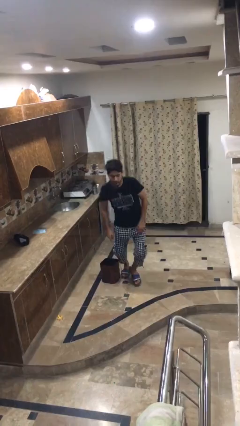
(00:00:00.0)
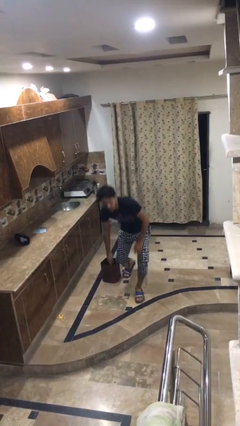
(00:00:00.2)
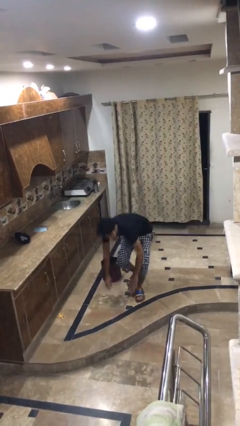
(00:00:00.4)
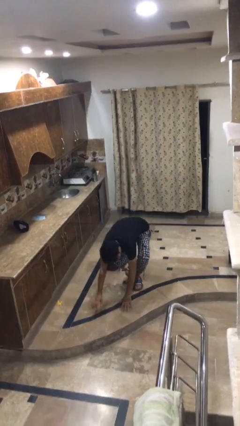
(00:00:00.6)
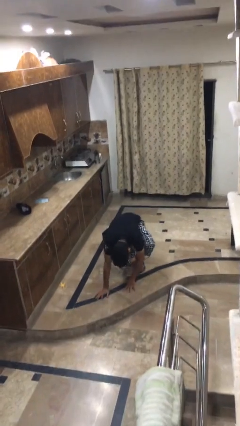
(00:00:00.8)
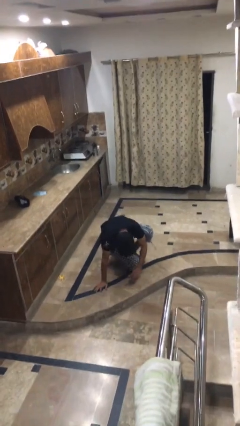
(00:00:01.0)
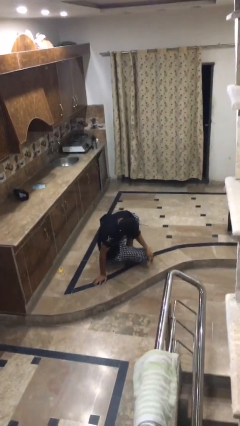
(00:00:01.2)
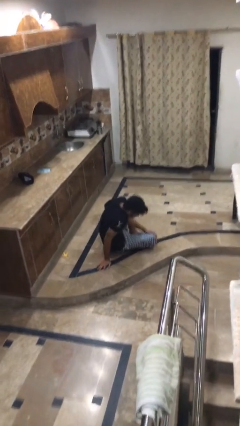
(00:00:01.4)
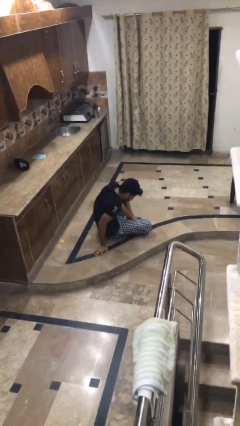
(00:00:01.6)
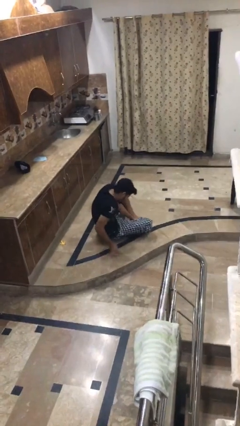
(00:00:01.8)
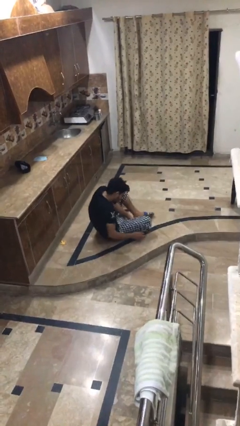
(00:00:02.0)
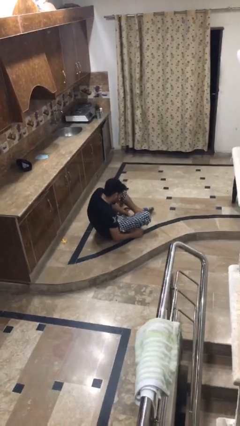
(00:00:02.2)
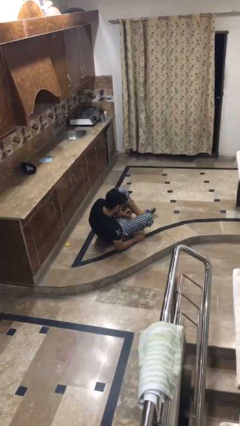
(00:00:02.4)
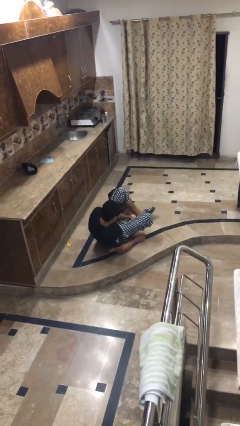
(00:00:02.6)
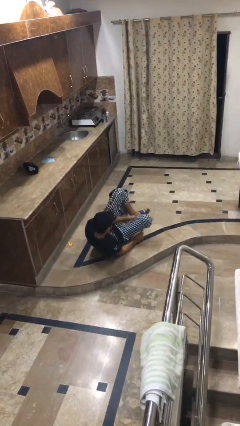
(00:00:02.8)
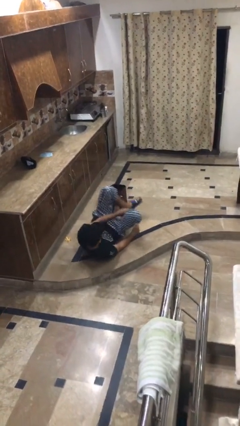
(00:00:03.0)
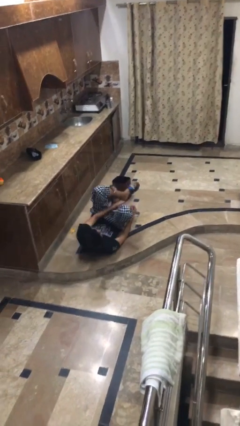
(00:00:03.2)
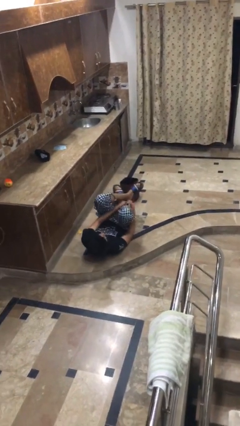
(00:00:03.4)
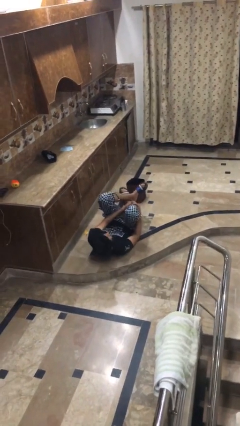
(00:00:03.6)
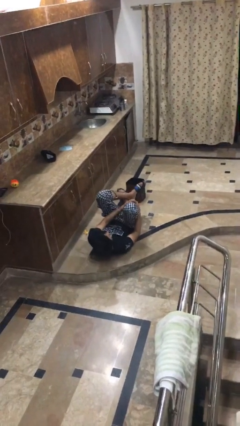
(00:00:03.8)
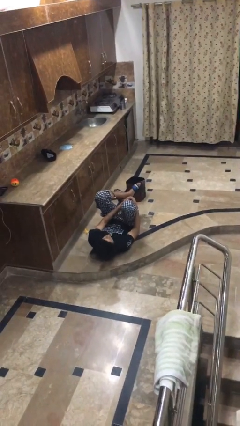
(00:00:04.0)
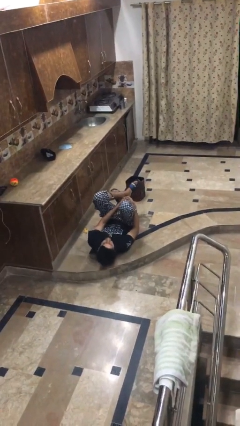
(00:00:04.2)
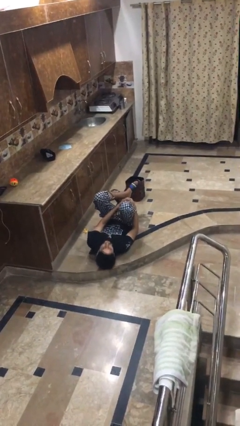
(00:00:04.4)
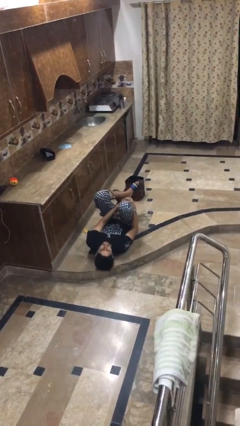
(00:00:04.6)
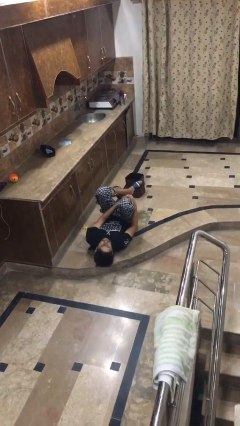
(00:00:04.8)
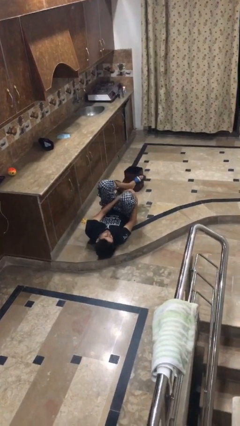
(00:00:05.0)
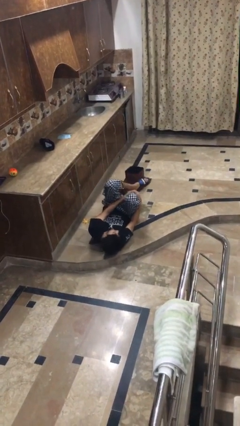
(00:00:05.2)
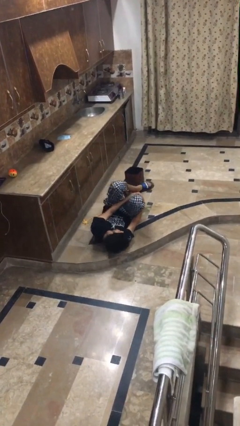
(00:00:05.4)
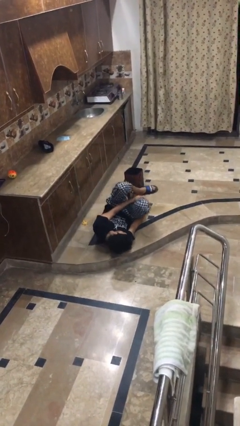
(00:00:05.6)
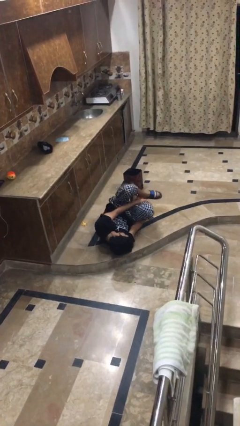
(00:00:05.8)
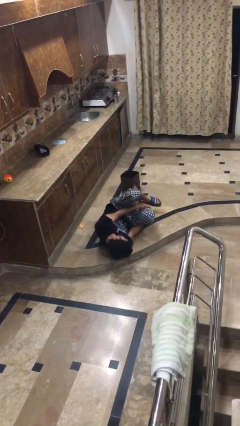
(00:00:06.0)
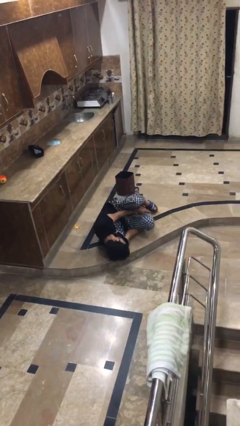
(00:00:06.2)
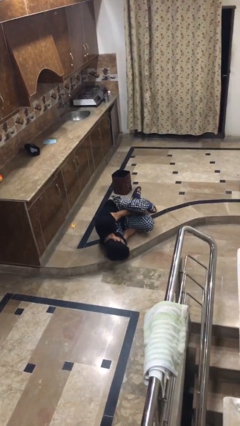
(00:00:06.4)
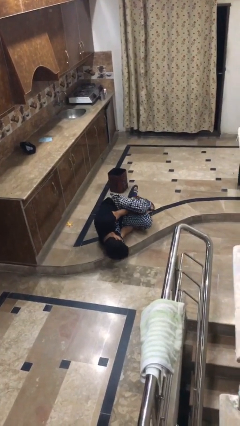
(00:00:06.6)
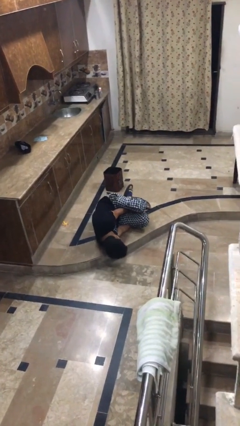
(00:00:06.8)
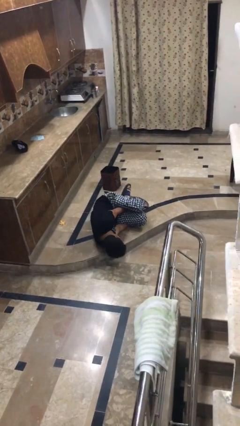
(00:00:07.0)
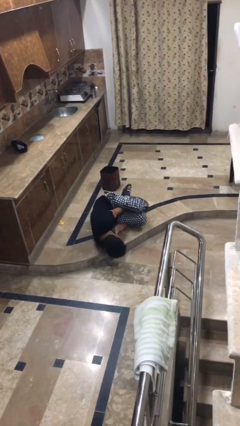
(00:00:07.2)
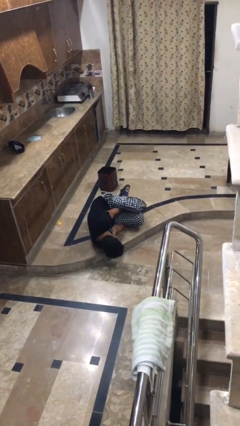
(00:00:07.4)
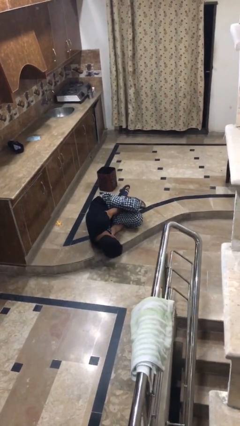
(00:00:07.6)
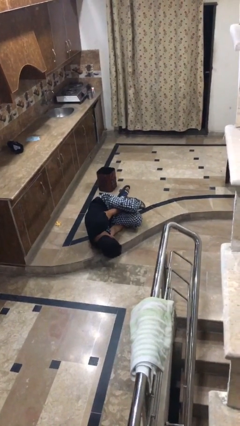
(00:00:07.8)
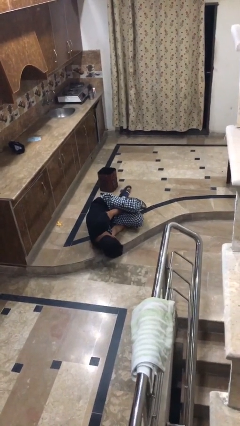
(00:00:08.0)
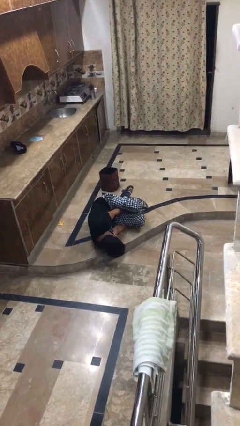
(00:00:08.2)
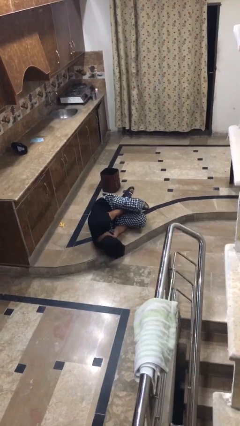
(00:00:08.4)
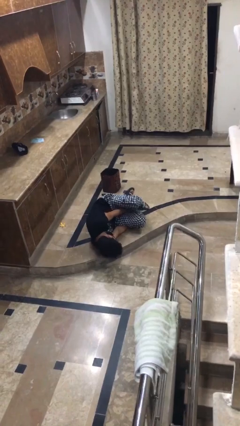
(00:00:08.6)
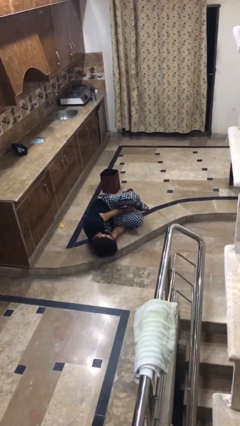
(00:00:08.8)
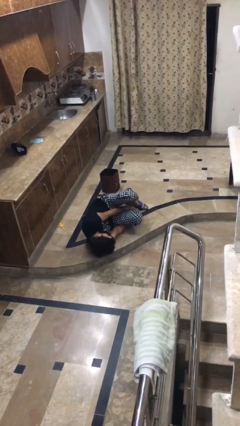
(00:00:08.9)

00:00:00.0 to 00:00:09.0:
person lies down on floor

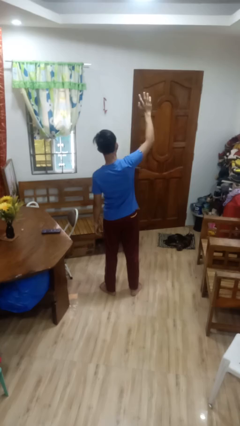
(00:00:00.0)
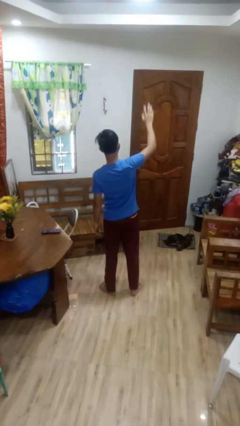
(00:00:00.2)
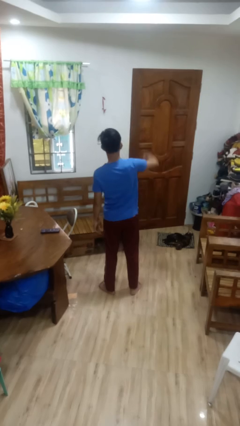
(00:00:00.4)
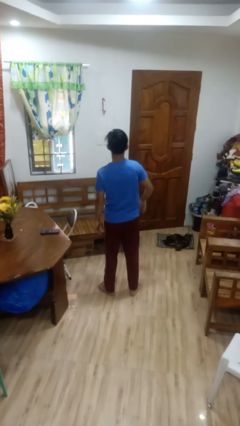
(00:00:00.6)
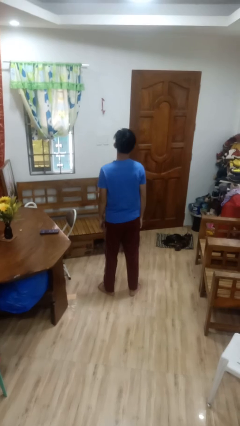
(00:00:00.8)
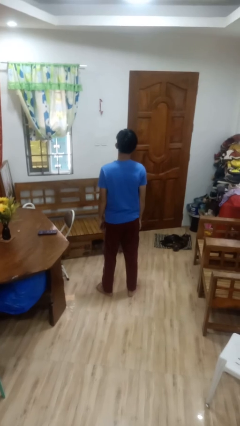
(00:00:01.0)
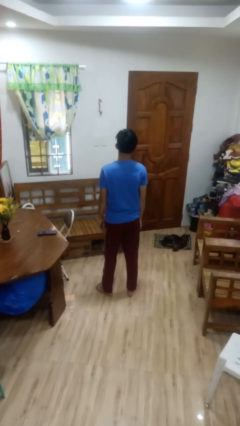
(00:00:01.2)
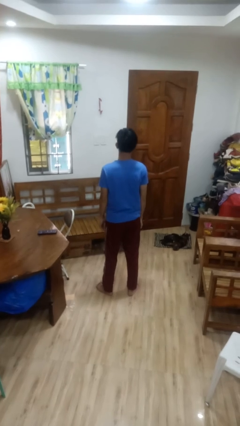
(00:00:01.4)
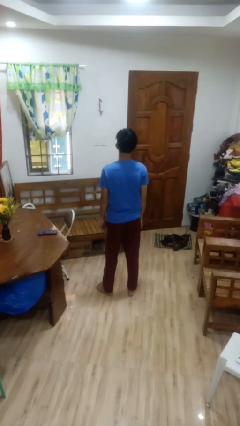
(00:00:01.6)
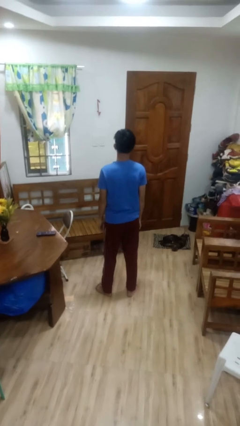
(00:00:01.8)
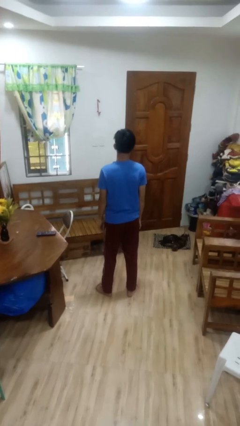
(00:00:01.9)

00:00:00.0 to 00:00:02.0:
person gestures lower hand

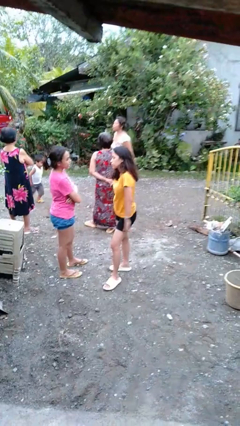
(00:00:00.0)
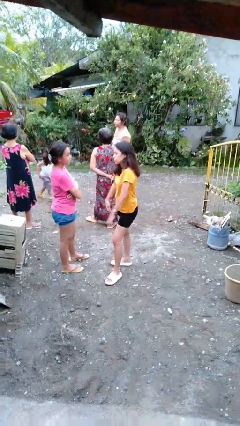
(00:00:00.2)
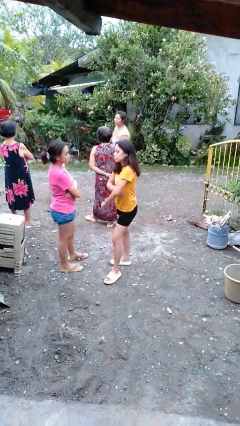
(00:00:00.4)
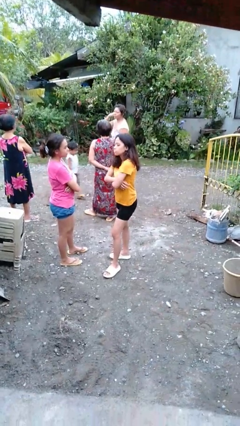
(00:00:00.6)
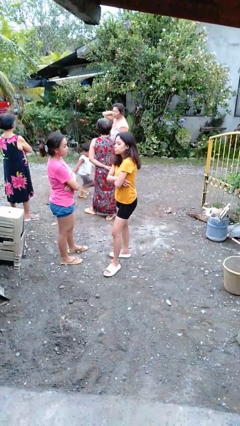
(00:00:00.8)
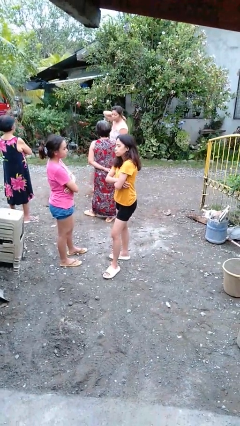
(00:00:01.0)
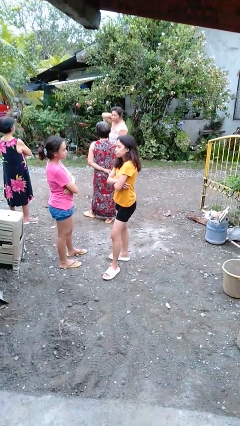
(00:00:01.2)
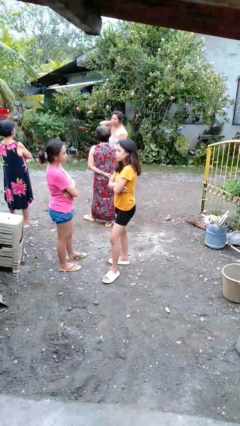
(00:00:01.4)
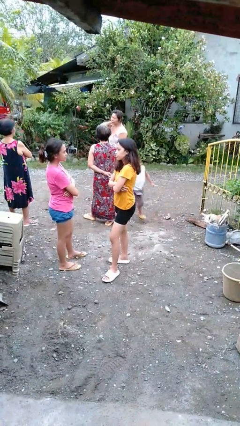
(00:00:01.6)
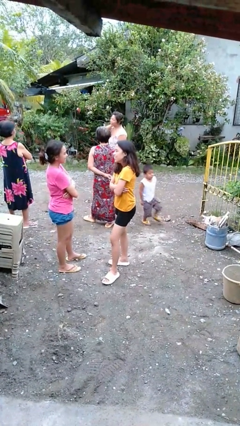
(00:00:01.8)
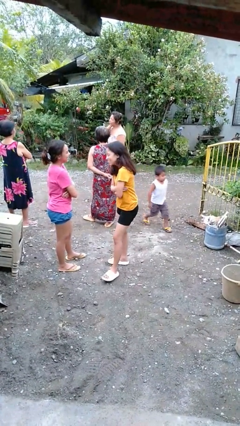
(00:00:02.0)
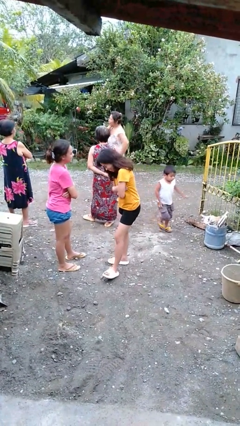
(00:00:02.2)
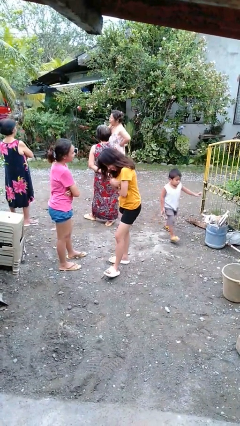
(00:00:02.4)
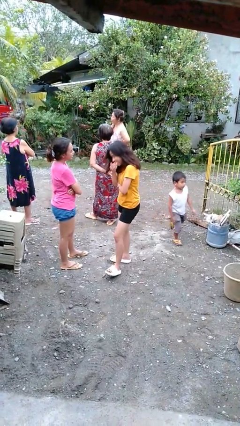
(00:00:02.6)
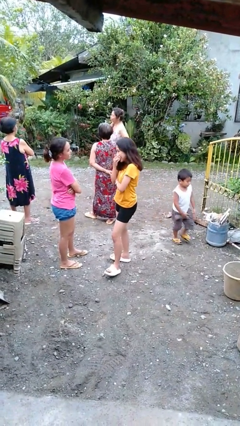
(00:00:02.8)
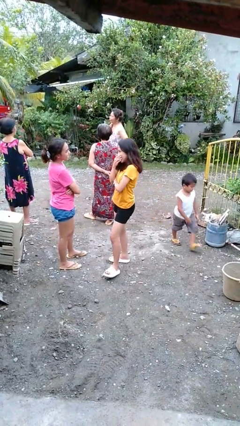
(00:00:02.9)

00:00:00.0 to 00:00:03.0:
person laughs with person

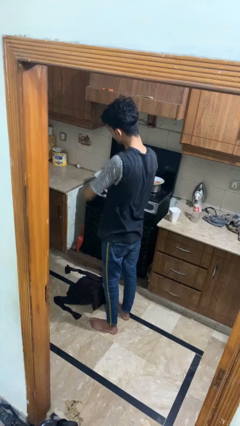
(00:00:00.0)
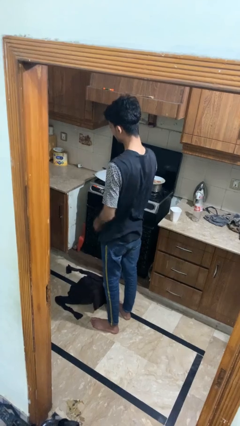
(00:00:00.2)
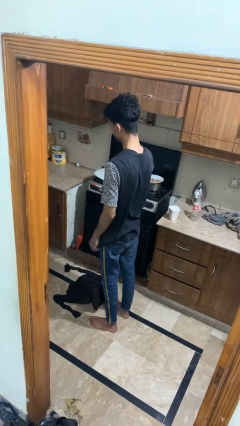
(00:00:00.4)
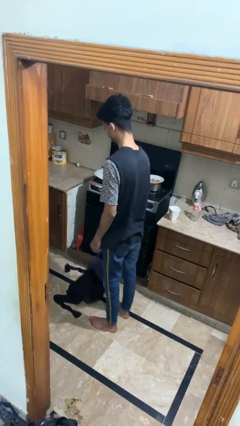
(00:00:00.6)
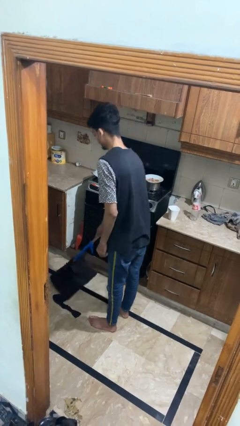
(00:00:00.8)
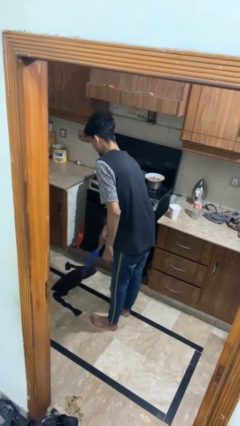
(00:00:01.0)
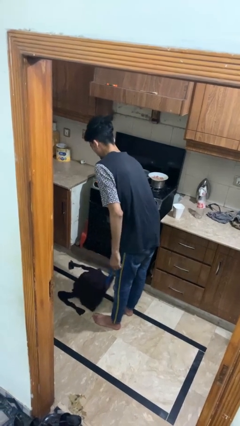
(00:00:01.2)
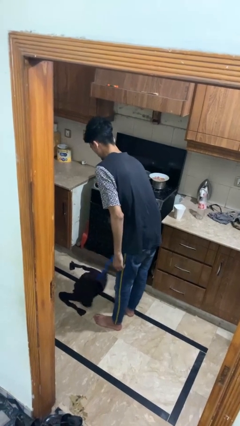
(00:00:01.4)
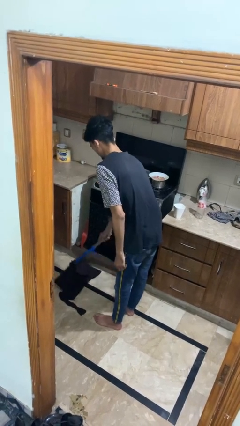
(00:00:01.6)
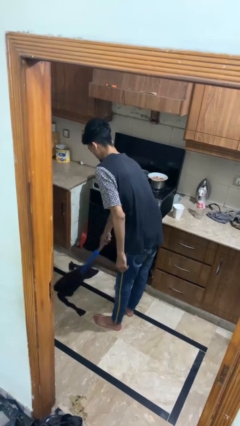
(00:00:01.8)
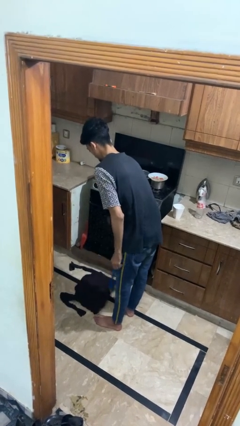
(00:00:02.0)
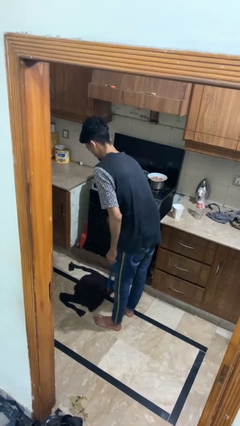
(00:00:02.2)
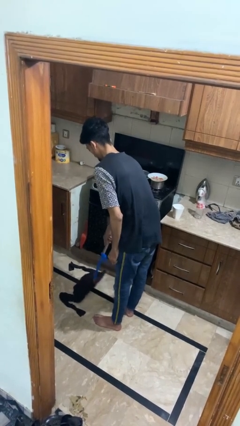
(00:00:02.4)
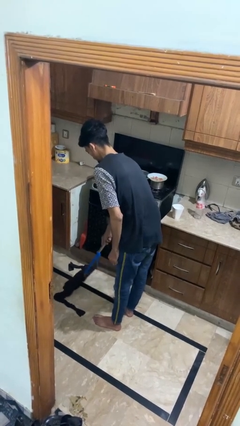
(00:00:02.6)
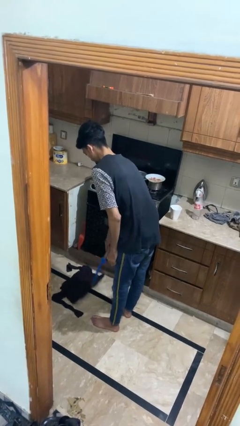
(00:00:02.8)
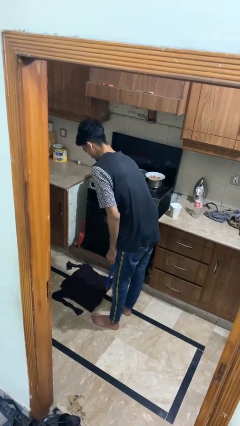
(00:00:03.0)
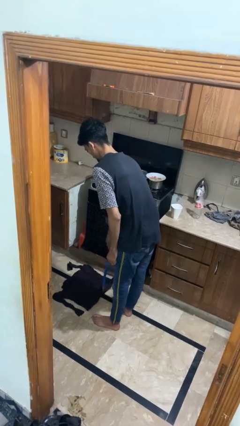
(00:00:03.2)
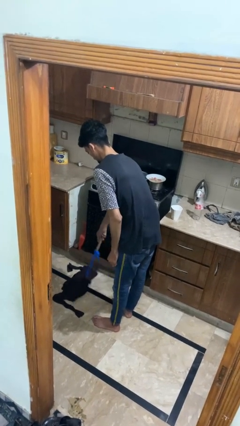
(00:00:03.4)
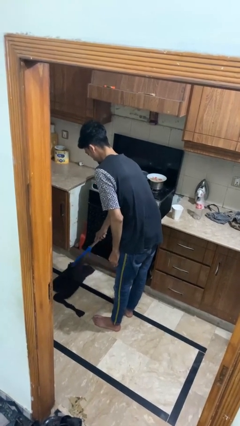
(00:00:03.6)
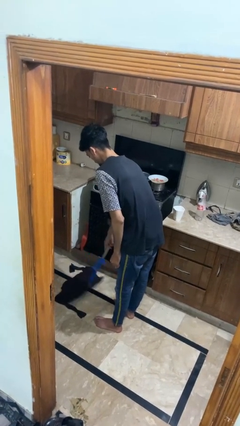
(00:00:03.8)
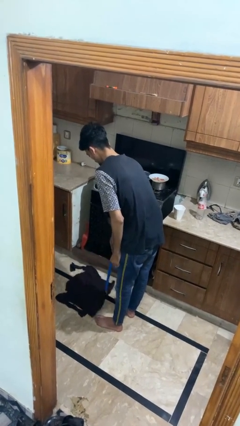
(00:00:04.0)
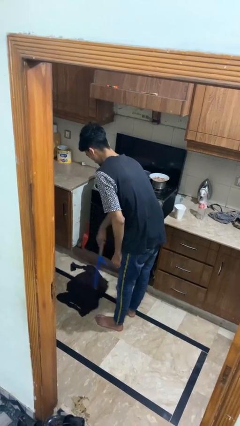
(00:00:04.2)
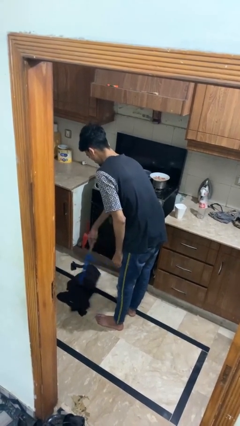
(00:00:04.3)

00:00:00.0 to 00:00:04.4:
person mops
